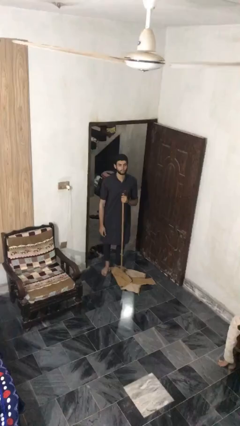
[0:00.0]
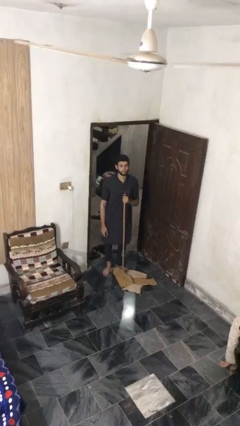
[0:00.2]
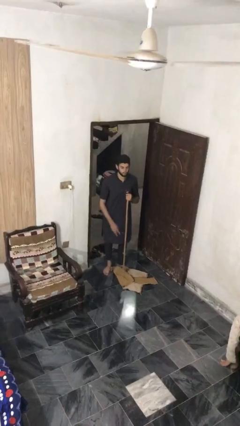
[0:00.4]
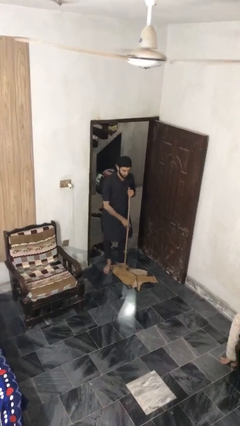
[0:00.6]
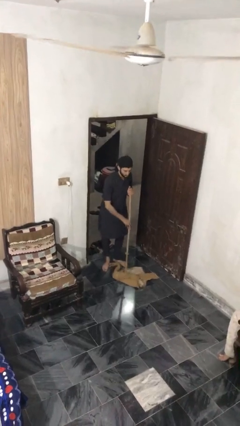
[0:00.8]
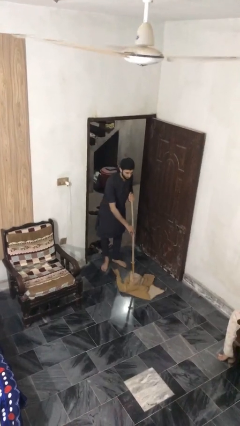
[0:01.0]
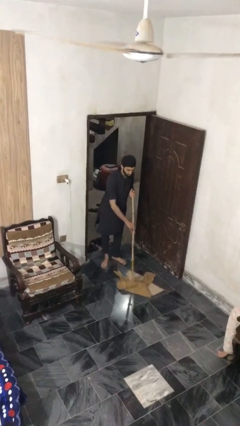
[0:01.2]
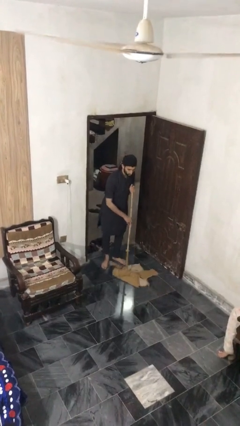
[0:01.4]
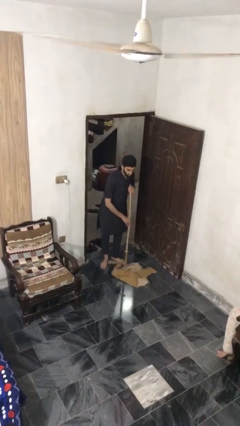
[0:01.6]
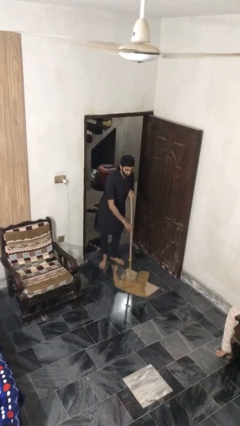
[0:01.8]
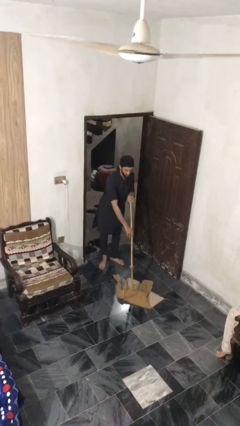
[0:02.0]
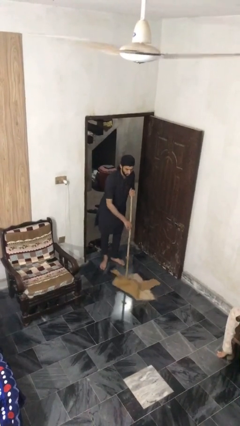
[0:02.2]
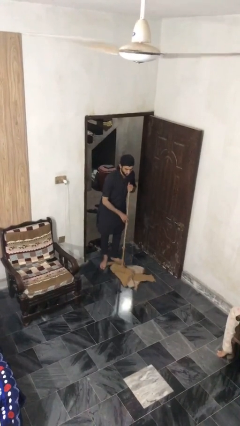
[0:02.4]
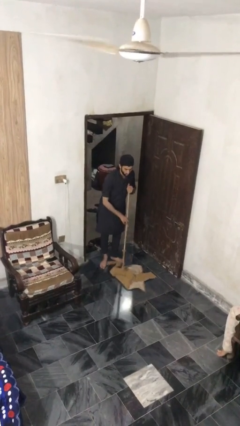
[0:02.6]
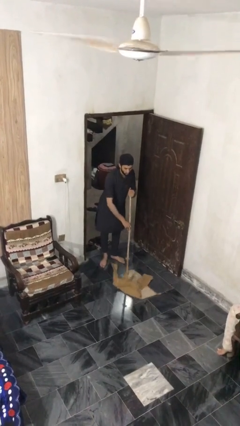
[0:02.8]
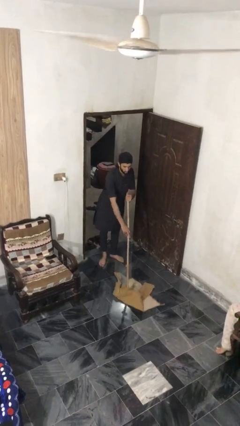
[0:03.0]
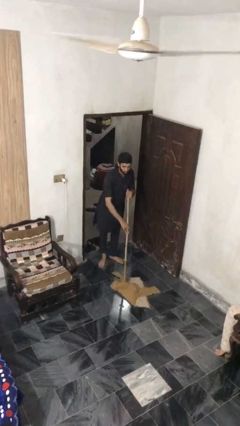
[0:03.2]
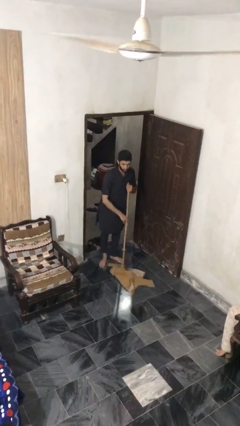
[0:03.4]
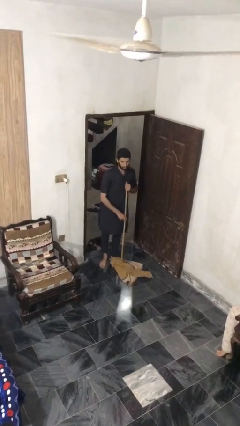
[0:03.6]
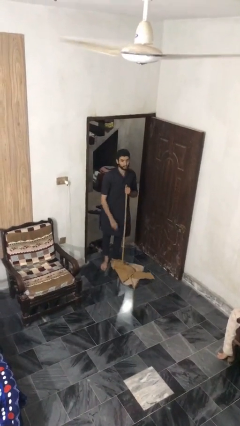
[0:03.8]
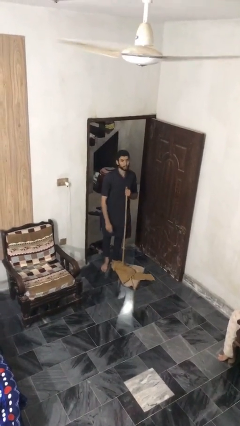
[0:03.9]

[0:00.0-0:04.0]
person mops

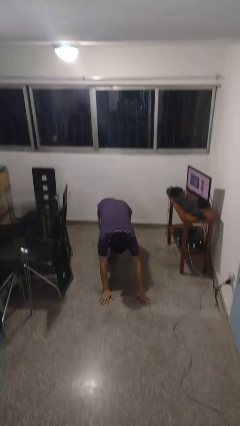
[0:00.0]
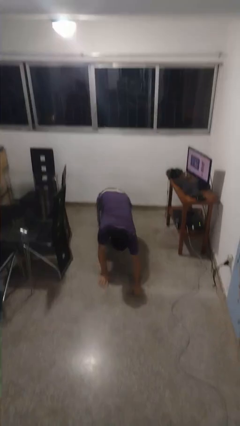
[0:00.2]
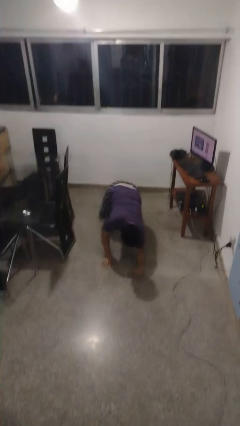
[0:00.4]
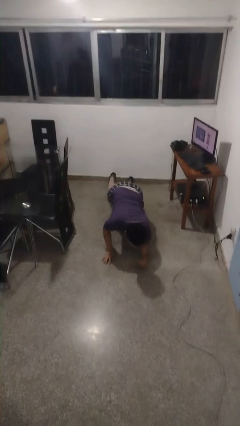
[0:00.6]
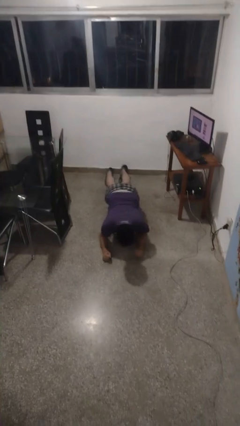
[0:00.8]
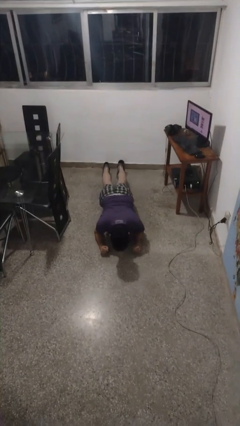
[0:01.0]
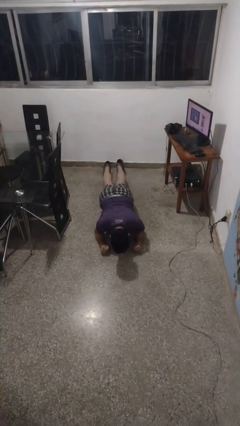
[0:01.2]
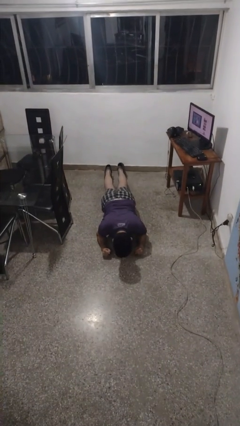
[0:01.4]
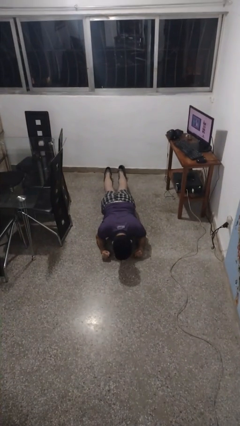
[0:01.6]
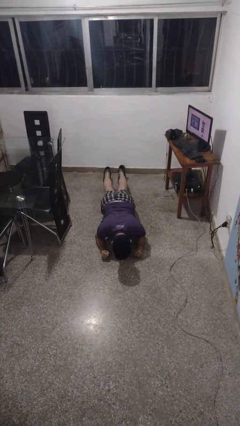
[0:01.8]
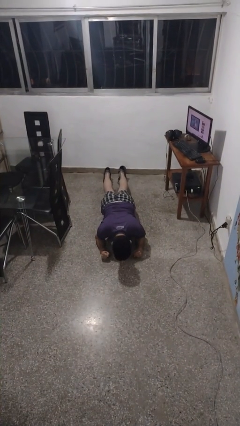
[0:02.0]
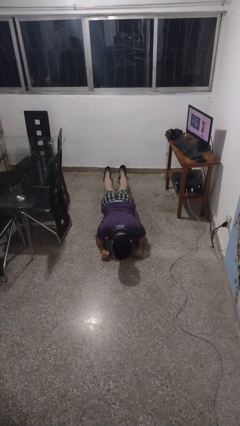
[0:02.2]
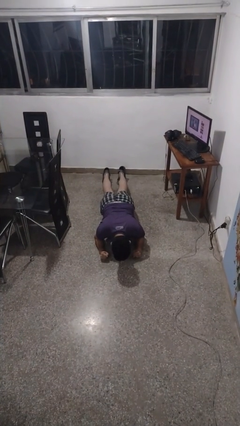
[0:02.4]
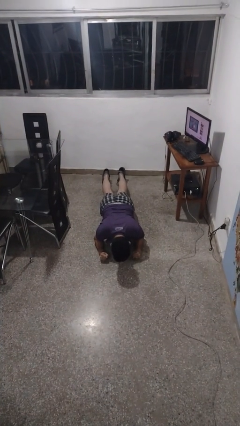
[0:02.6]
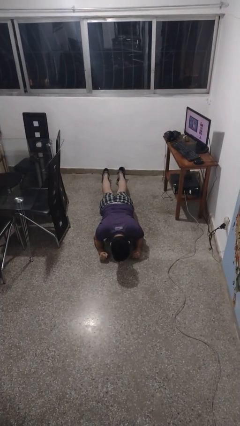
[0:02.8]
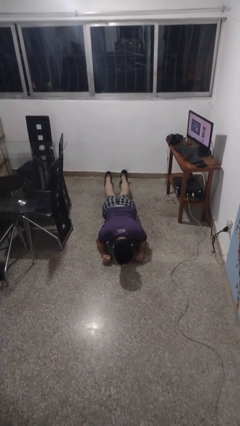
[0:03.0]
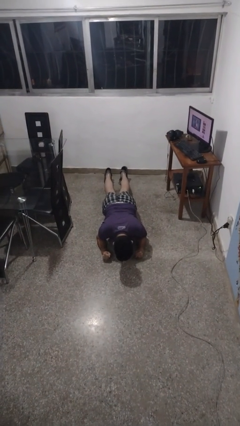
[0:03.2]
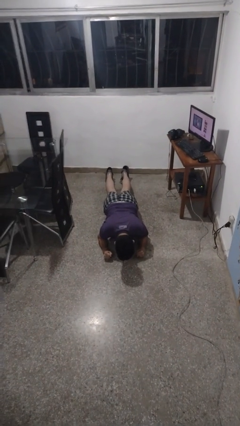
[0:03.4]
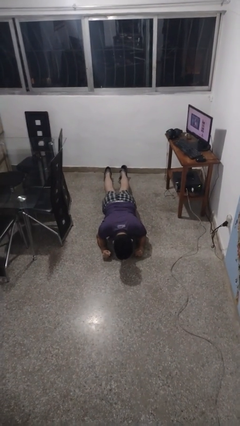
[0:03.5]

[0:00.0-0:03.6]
person exercises with plank

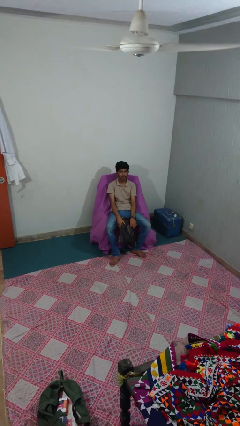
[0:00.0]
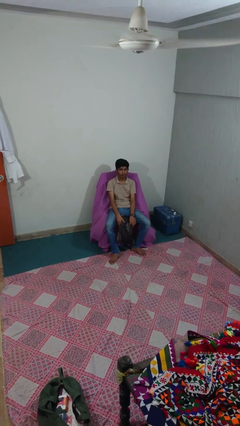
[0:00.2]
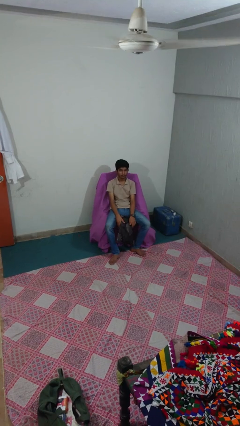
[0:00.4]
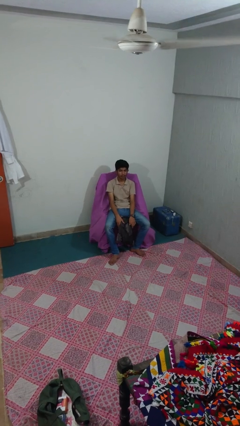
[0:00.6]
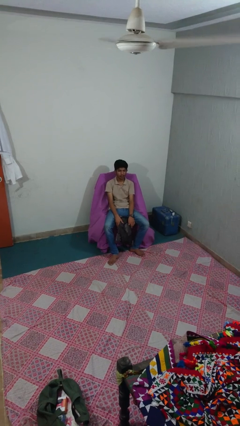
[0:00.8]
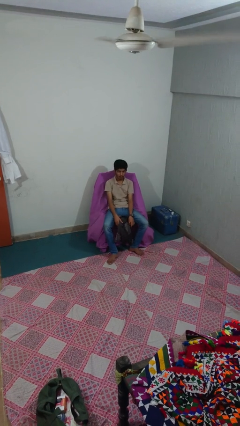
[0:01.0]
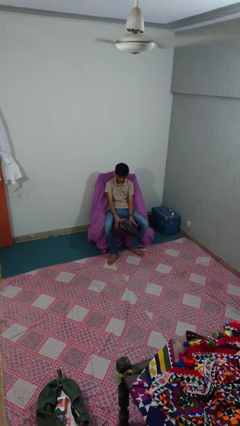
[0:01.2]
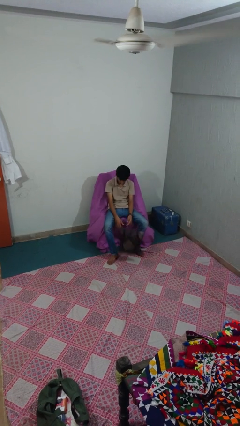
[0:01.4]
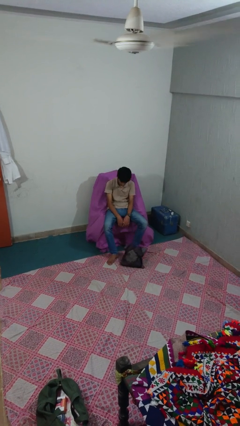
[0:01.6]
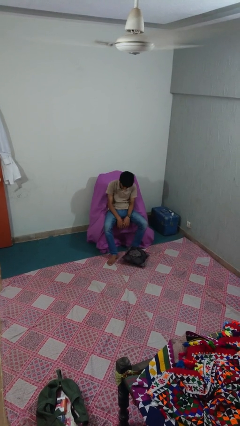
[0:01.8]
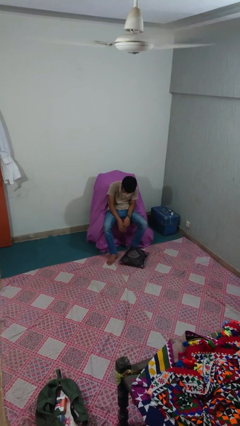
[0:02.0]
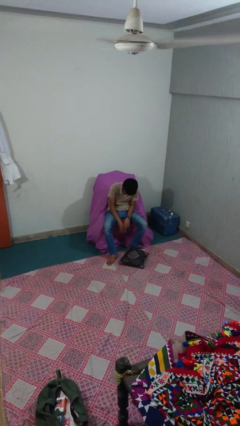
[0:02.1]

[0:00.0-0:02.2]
person drops object

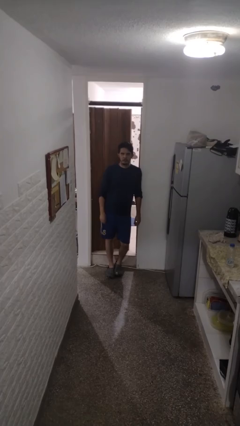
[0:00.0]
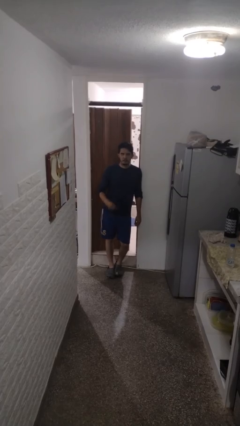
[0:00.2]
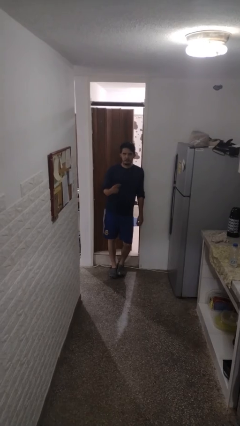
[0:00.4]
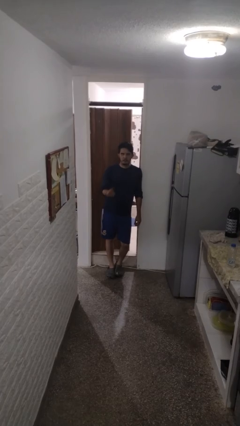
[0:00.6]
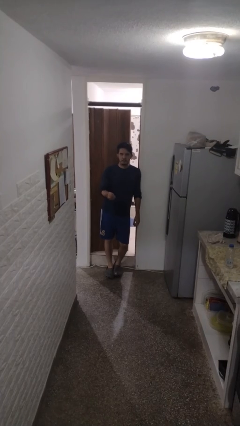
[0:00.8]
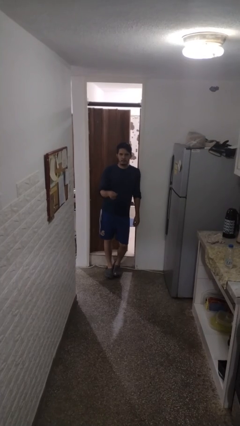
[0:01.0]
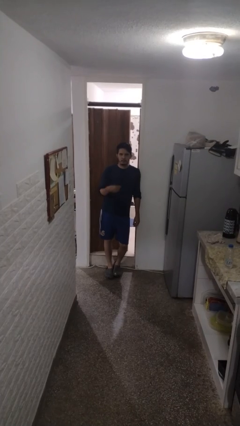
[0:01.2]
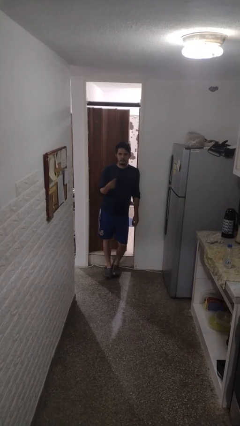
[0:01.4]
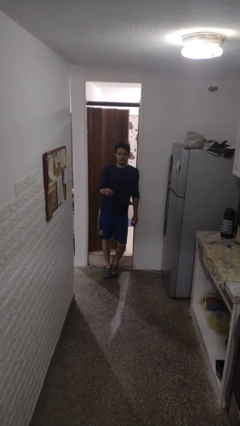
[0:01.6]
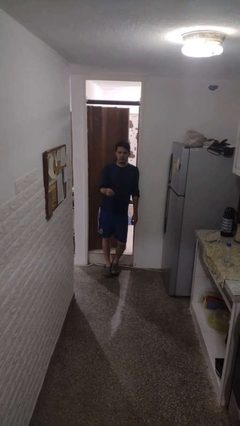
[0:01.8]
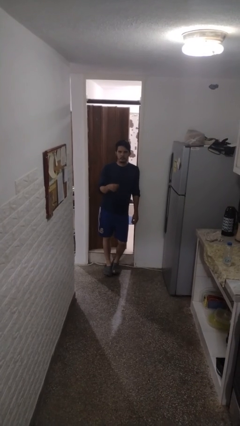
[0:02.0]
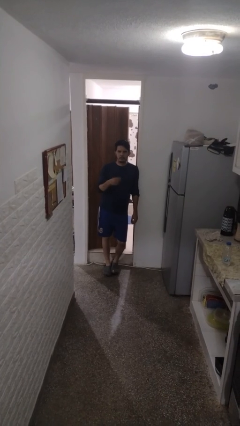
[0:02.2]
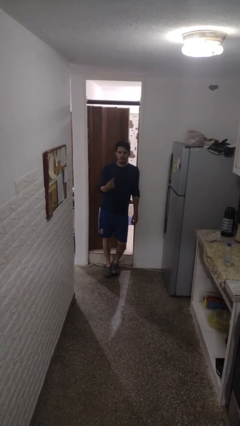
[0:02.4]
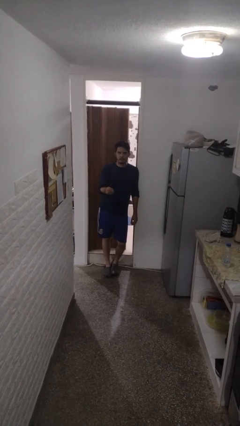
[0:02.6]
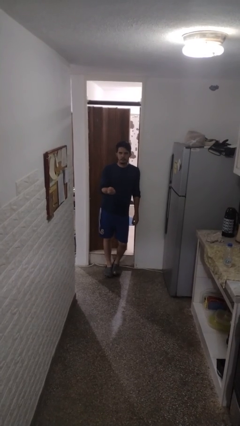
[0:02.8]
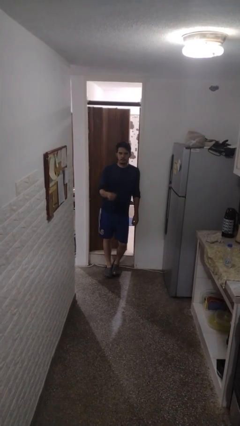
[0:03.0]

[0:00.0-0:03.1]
person snaps fingers

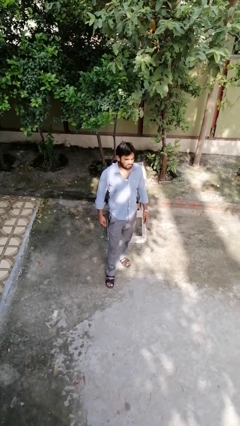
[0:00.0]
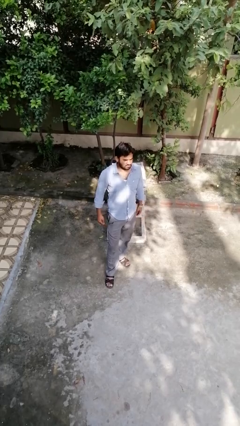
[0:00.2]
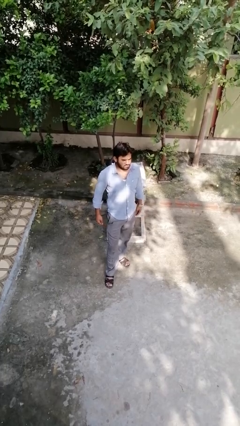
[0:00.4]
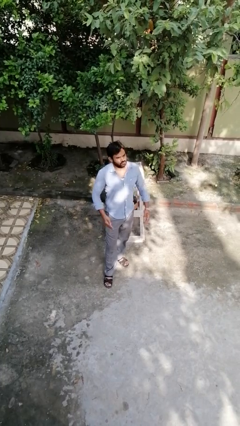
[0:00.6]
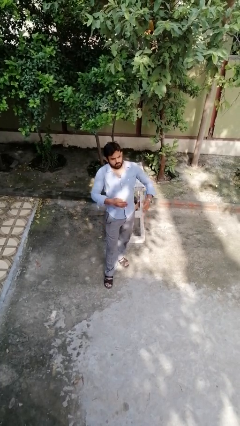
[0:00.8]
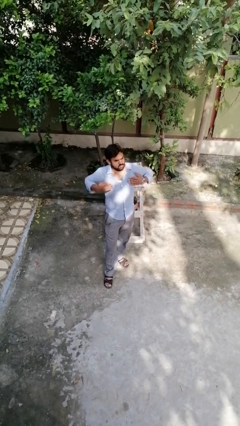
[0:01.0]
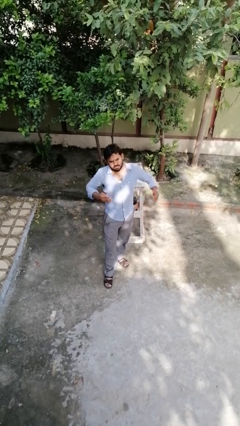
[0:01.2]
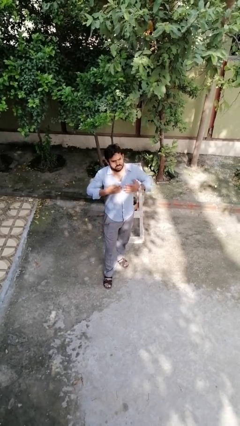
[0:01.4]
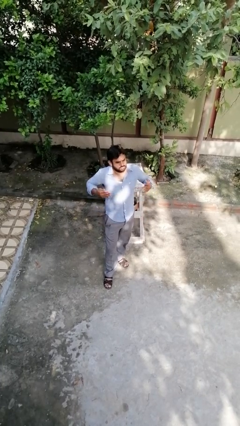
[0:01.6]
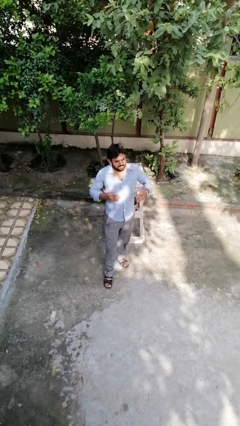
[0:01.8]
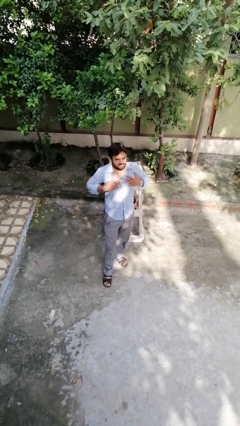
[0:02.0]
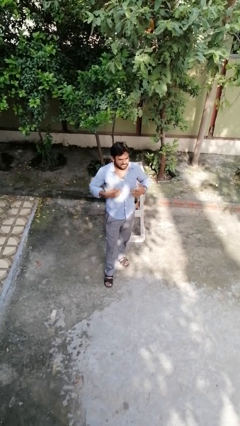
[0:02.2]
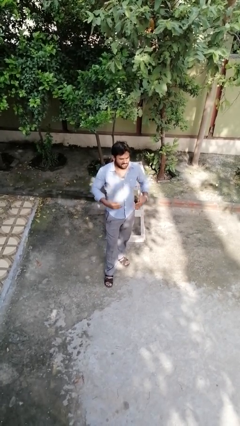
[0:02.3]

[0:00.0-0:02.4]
person drums on chest

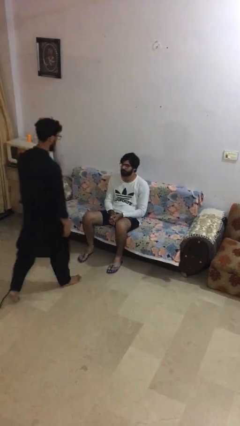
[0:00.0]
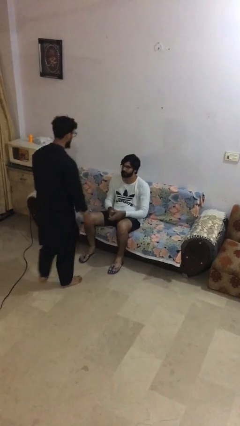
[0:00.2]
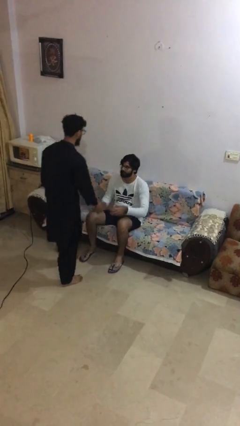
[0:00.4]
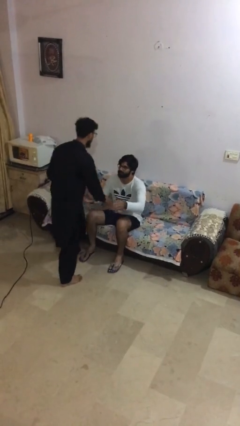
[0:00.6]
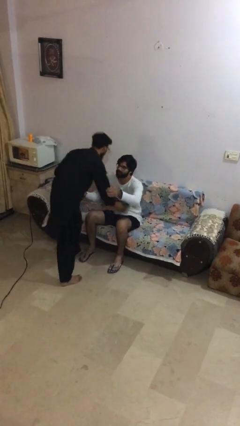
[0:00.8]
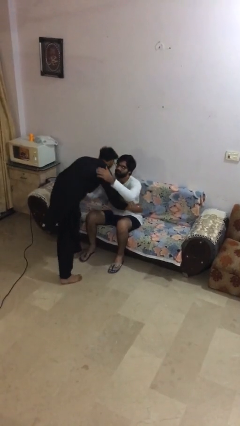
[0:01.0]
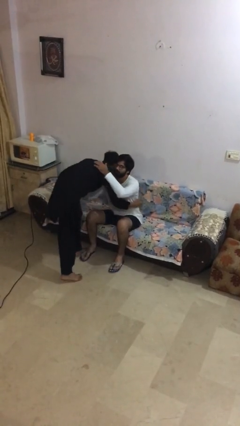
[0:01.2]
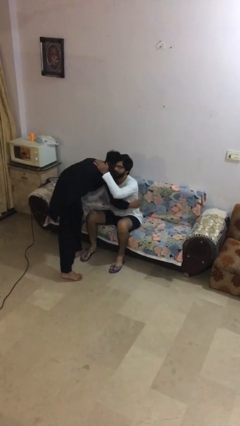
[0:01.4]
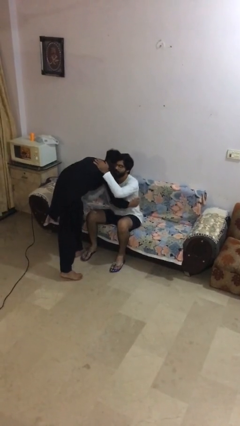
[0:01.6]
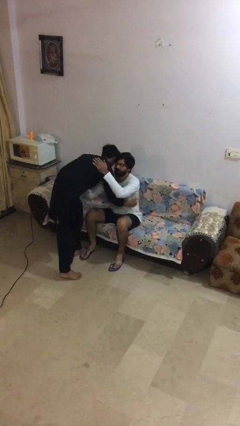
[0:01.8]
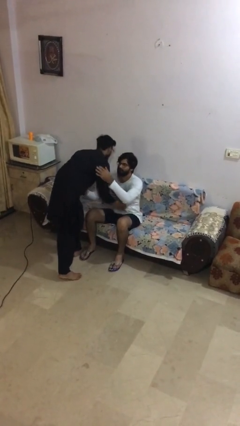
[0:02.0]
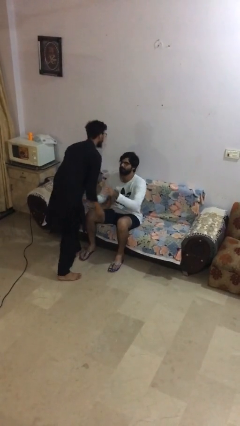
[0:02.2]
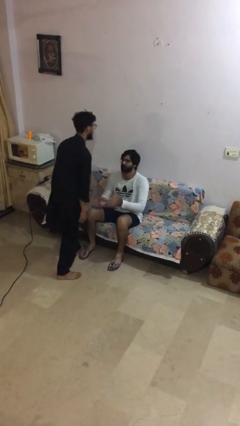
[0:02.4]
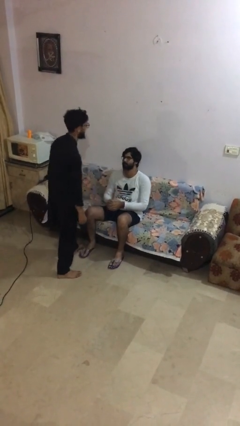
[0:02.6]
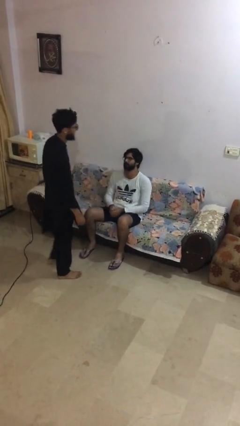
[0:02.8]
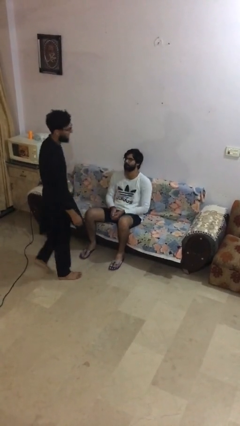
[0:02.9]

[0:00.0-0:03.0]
person embraces person
